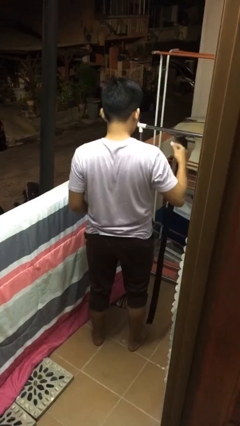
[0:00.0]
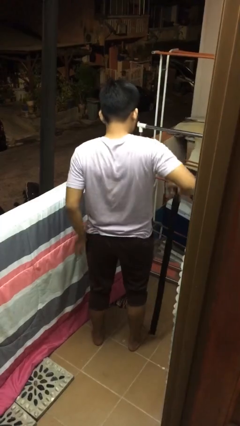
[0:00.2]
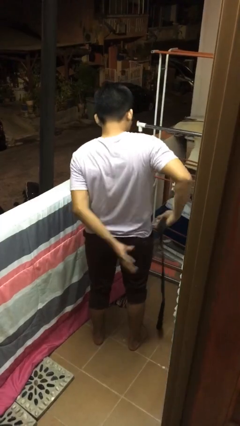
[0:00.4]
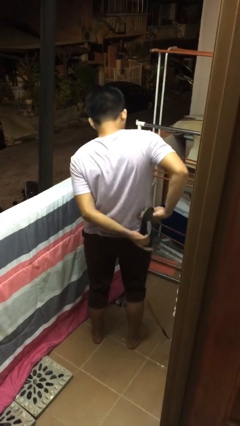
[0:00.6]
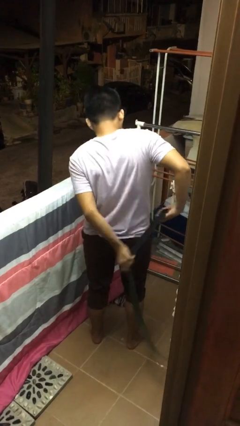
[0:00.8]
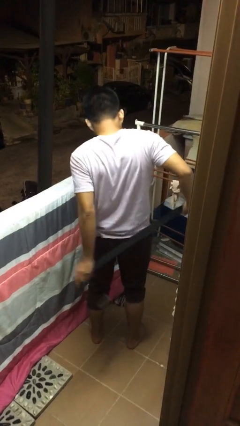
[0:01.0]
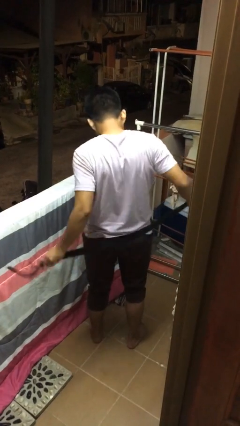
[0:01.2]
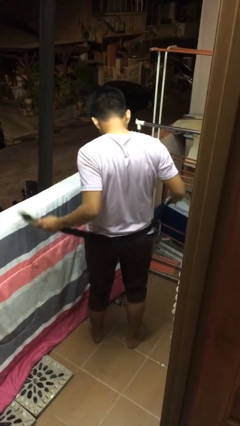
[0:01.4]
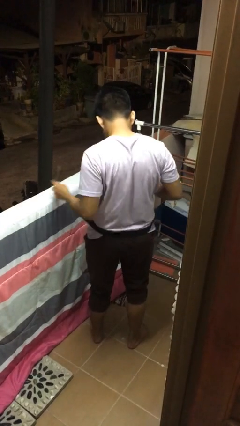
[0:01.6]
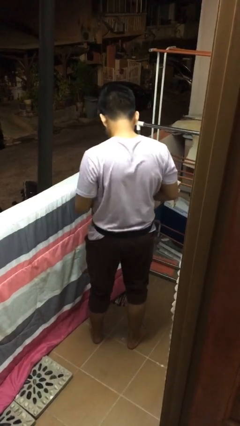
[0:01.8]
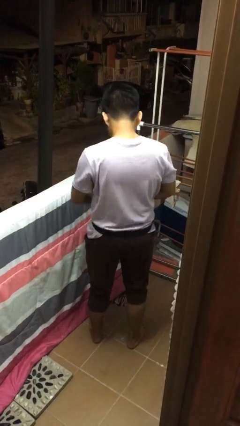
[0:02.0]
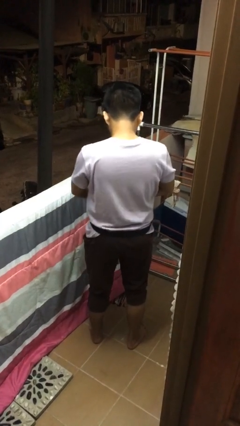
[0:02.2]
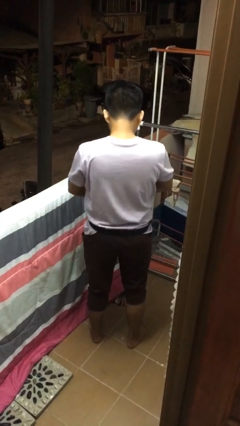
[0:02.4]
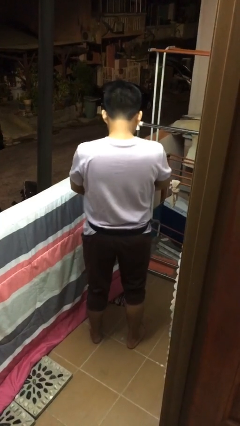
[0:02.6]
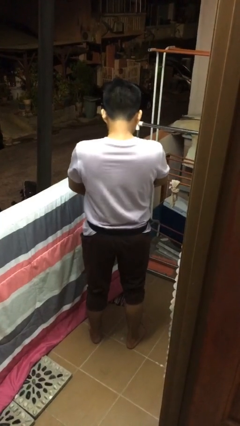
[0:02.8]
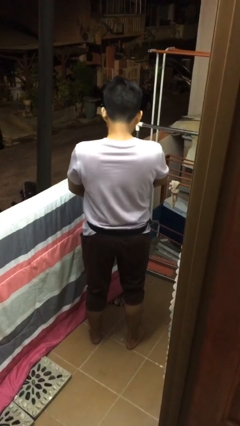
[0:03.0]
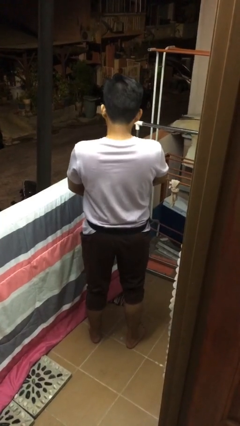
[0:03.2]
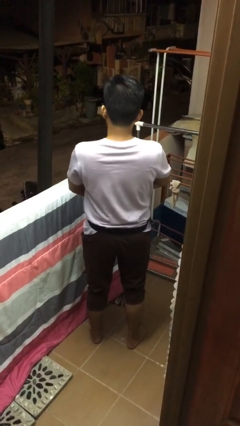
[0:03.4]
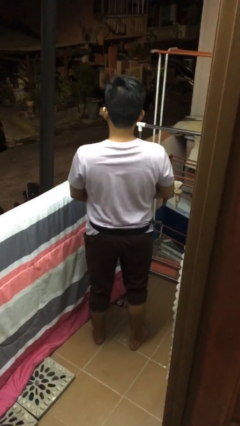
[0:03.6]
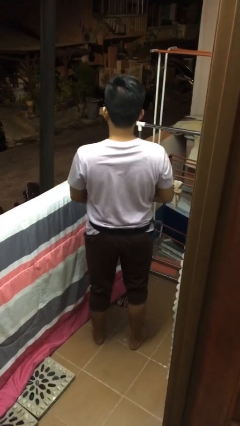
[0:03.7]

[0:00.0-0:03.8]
person puts on belt

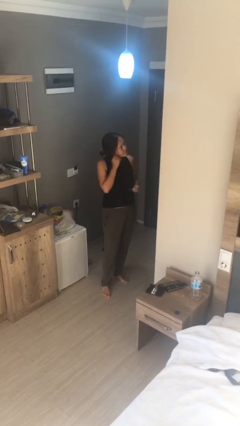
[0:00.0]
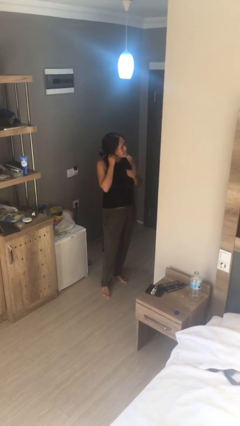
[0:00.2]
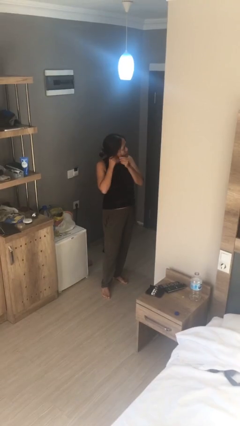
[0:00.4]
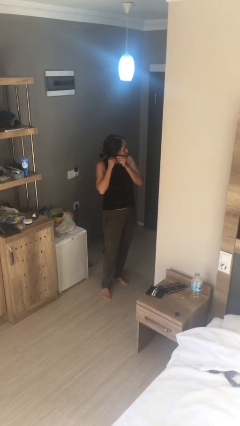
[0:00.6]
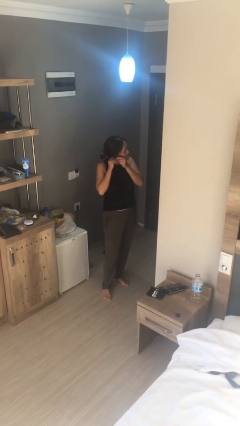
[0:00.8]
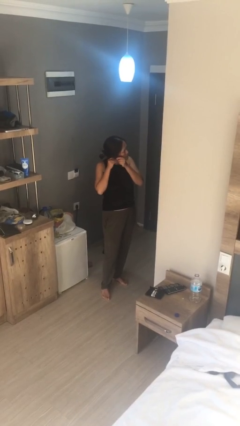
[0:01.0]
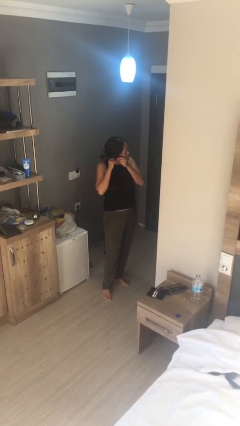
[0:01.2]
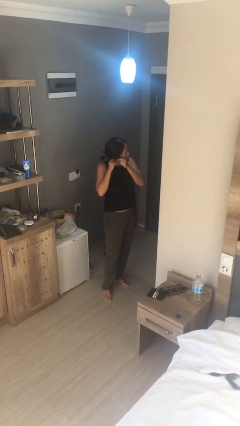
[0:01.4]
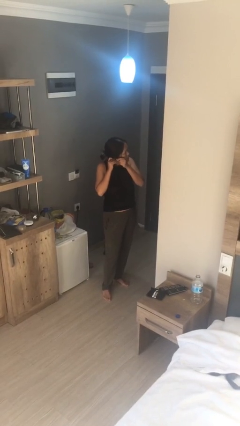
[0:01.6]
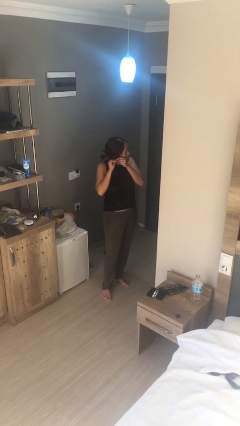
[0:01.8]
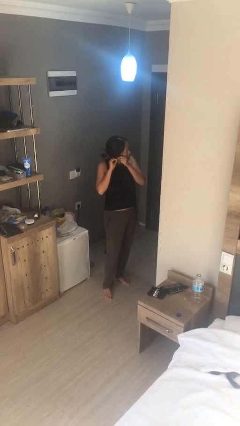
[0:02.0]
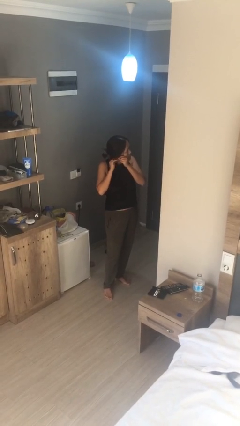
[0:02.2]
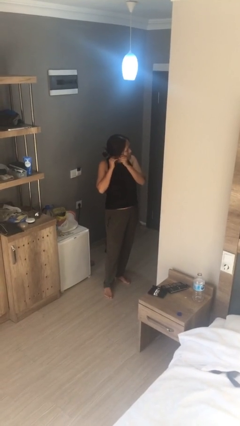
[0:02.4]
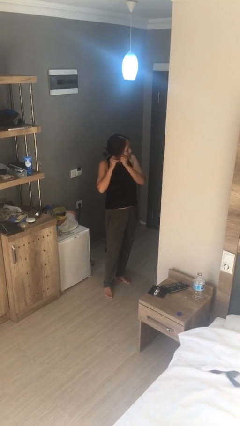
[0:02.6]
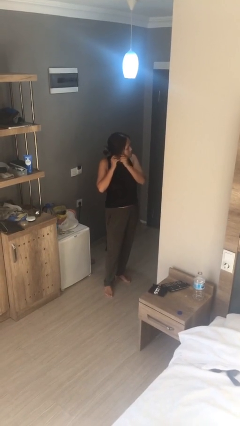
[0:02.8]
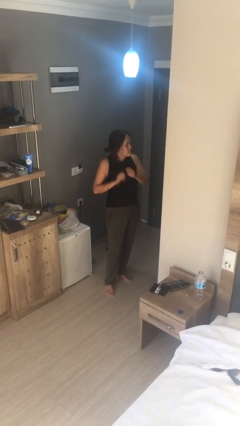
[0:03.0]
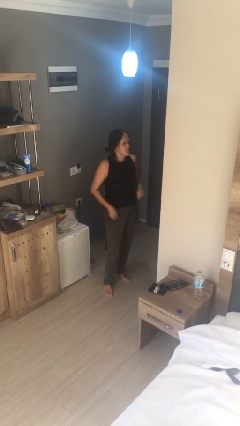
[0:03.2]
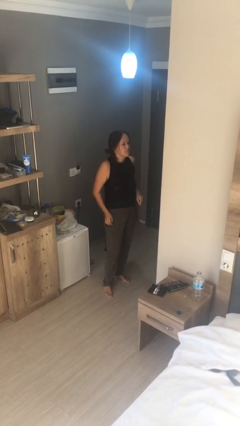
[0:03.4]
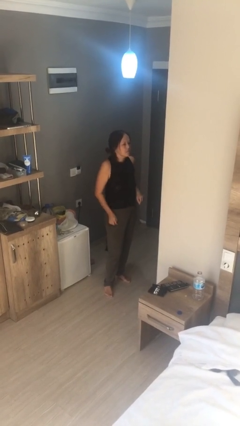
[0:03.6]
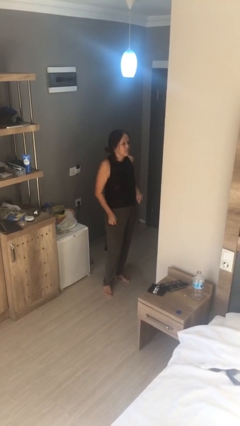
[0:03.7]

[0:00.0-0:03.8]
person puts on earrings

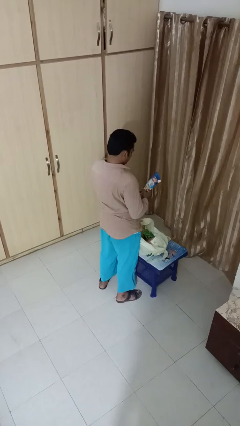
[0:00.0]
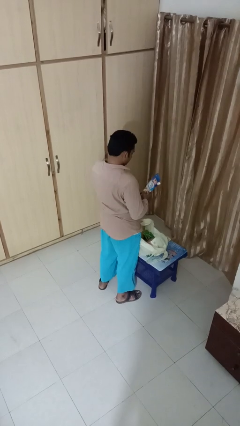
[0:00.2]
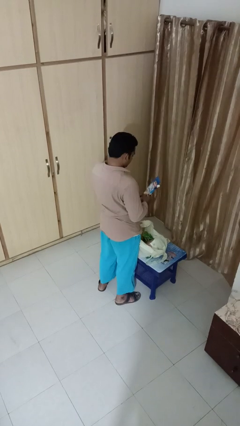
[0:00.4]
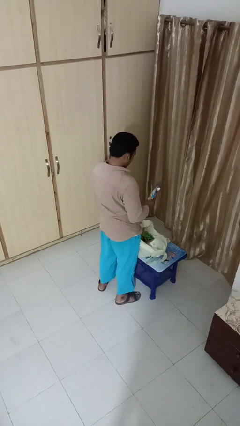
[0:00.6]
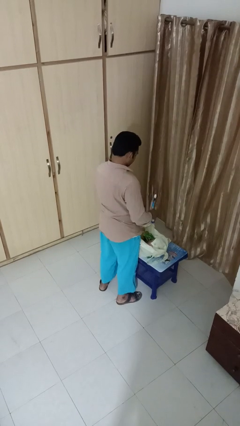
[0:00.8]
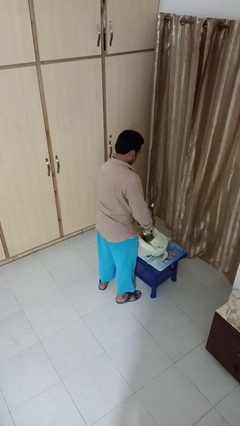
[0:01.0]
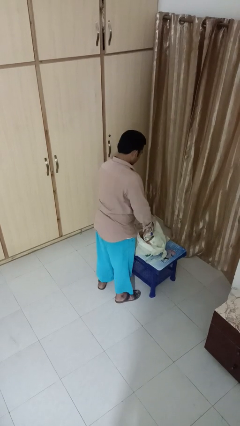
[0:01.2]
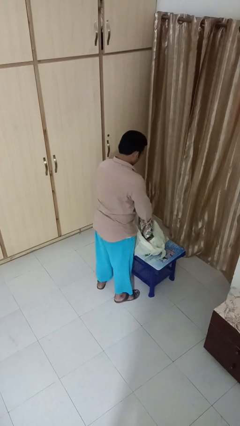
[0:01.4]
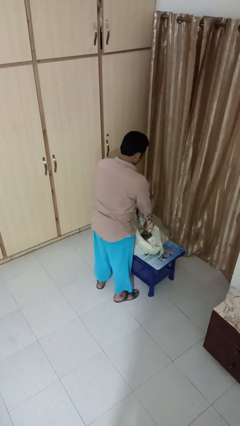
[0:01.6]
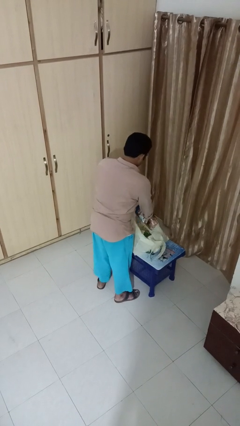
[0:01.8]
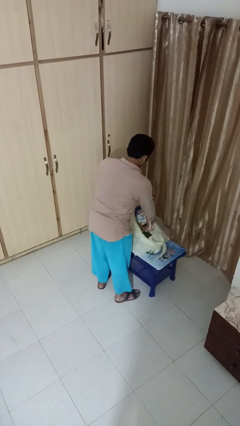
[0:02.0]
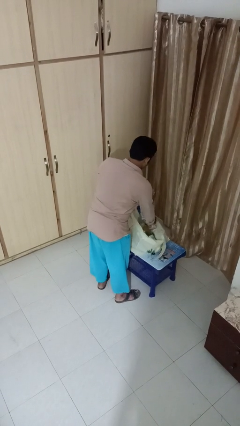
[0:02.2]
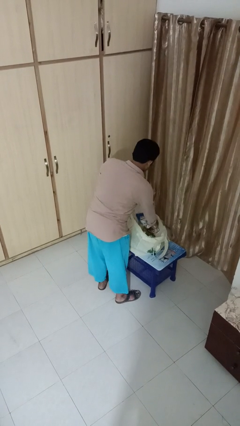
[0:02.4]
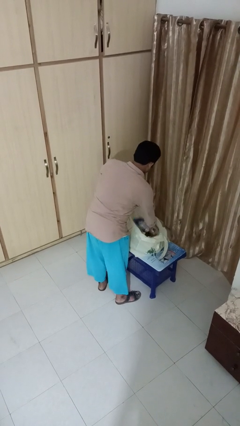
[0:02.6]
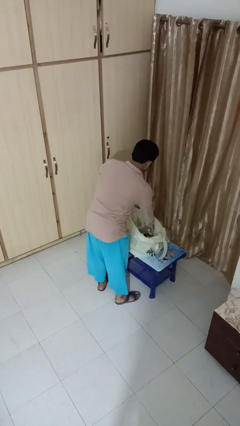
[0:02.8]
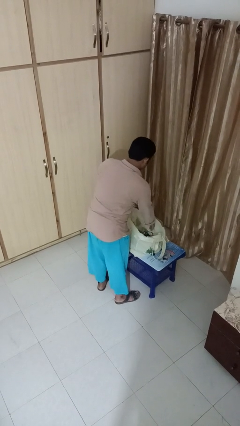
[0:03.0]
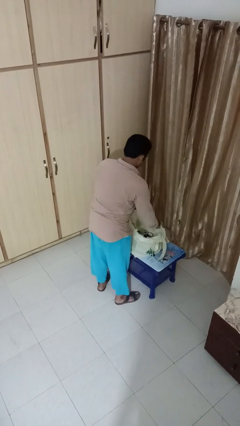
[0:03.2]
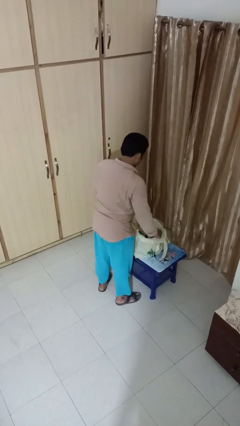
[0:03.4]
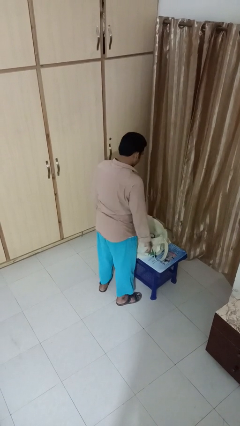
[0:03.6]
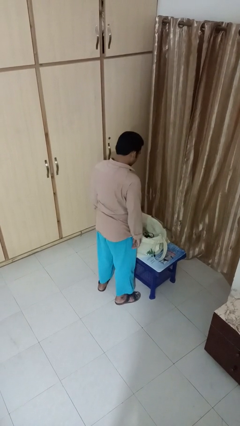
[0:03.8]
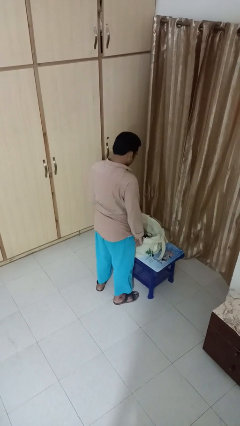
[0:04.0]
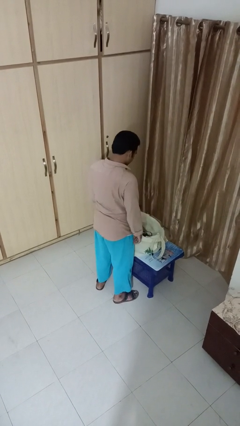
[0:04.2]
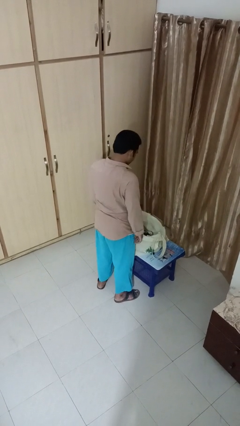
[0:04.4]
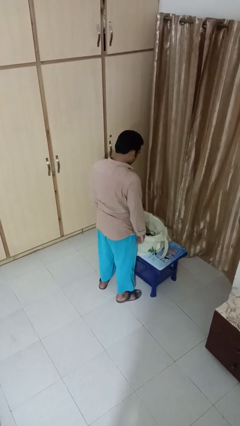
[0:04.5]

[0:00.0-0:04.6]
person puts object into bag

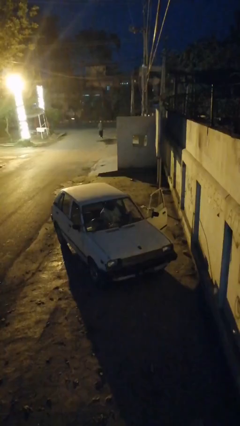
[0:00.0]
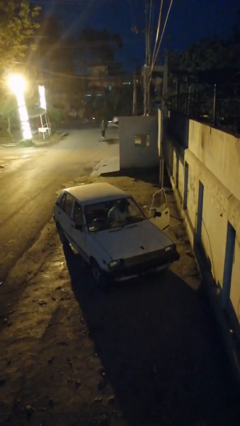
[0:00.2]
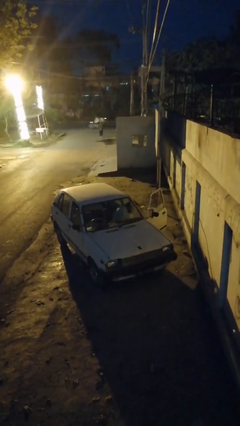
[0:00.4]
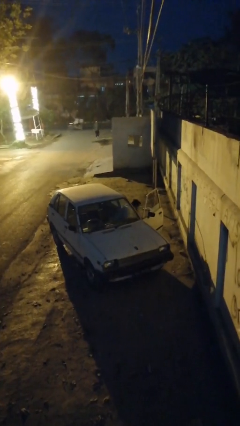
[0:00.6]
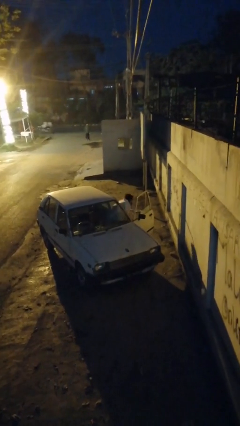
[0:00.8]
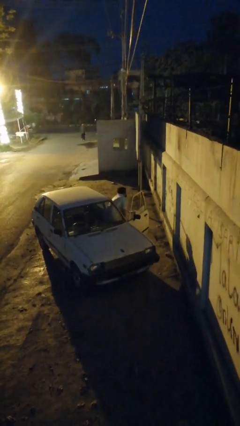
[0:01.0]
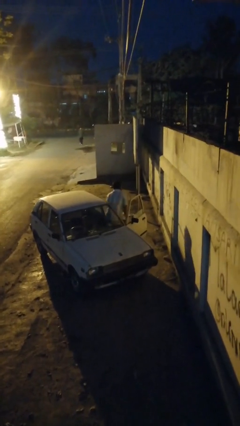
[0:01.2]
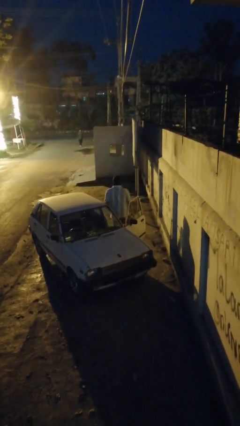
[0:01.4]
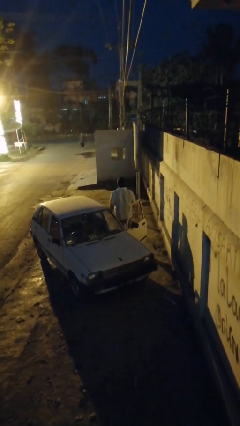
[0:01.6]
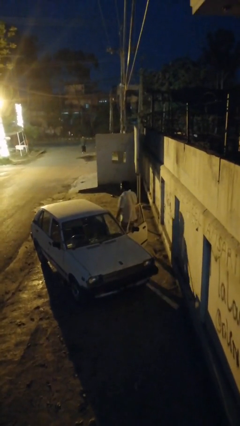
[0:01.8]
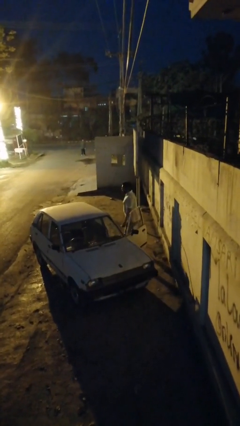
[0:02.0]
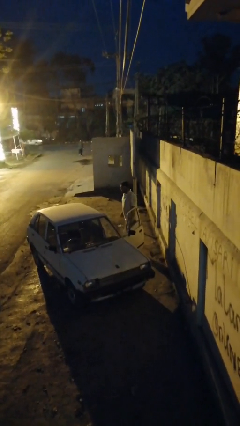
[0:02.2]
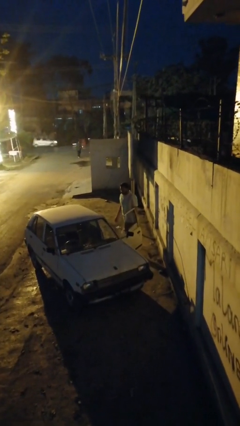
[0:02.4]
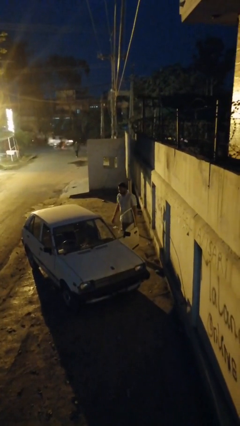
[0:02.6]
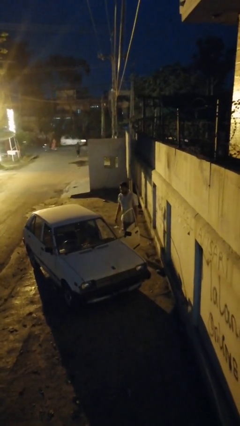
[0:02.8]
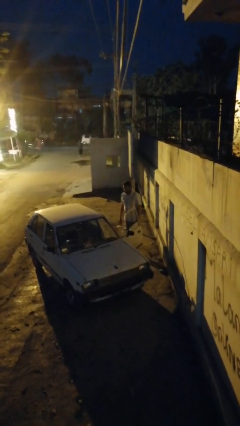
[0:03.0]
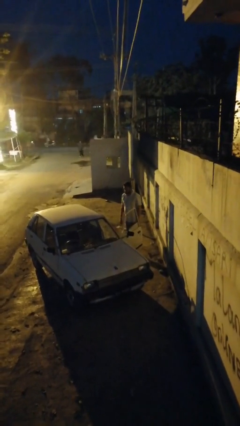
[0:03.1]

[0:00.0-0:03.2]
person exits car

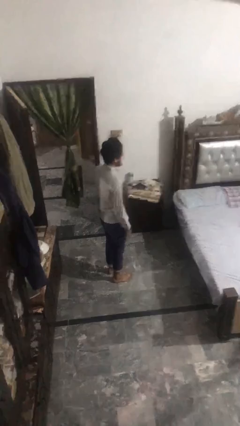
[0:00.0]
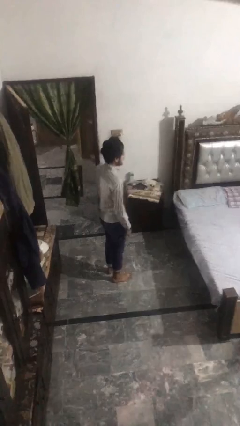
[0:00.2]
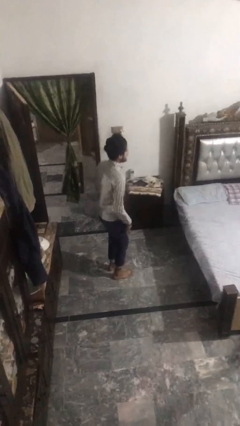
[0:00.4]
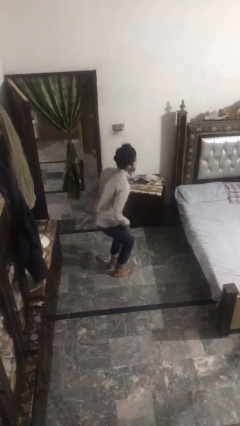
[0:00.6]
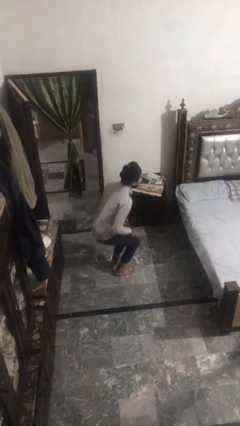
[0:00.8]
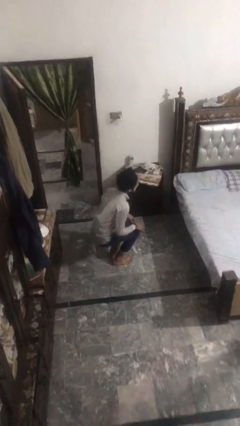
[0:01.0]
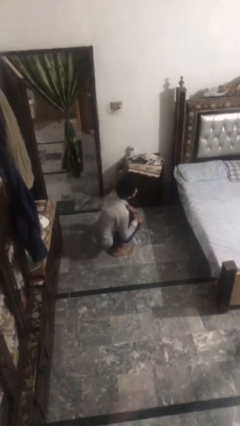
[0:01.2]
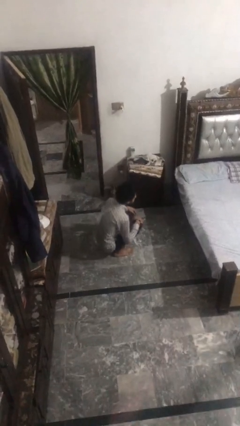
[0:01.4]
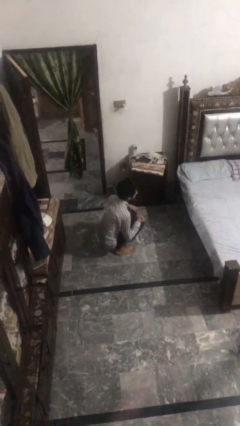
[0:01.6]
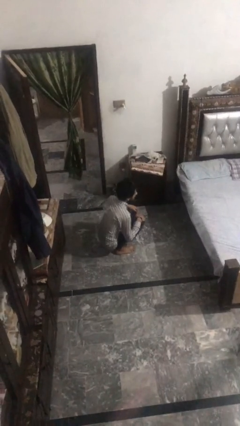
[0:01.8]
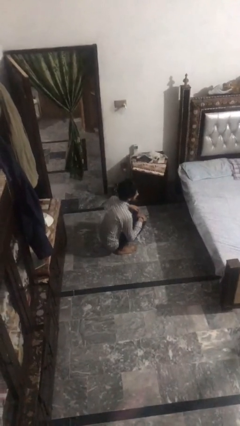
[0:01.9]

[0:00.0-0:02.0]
person squats
